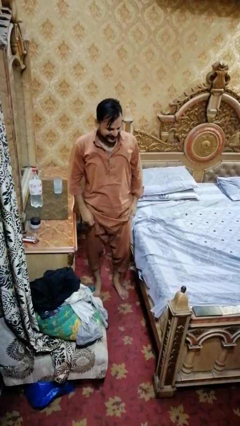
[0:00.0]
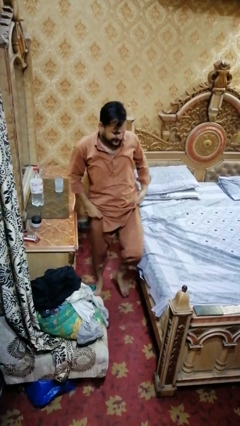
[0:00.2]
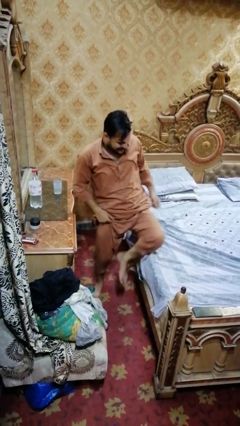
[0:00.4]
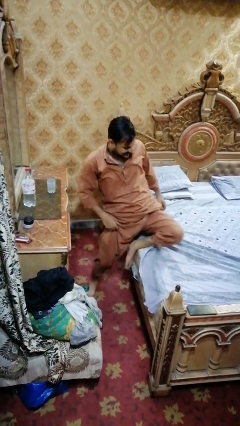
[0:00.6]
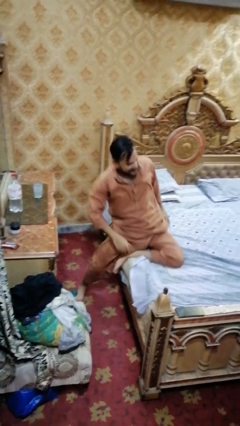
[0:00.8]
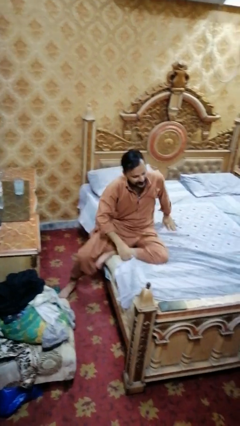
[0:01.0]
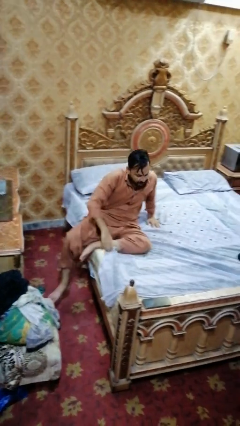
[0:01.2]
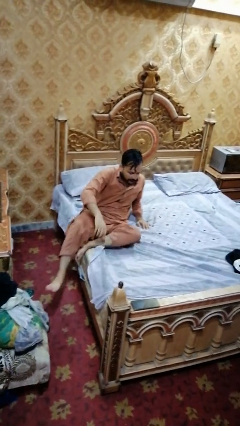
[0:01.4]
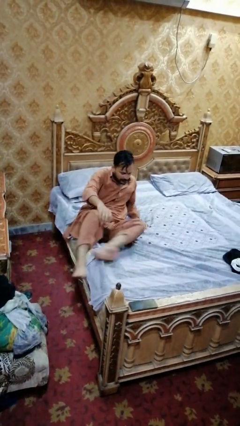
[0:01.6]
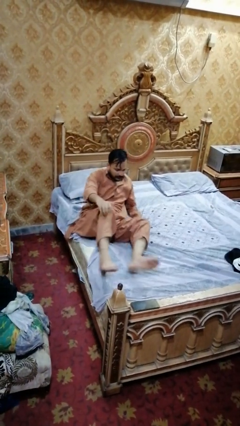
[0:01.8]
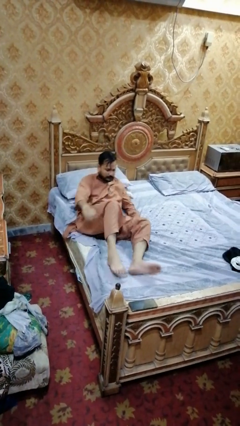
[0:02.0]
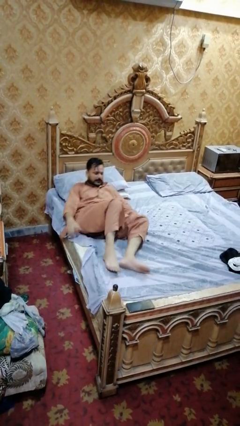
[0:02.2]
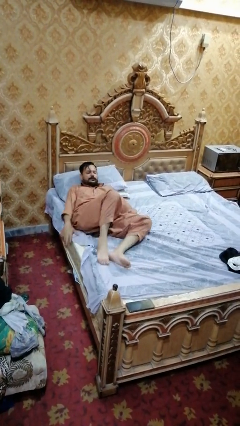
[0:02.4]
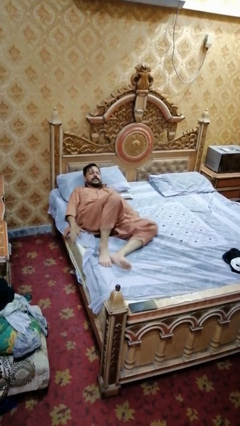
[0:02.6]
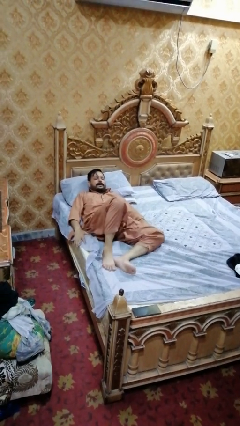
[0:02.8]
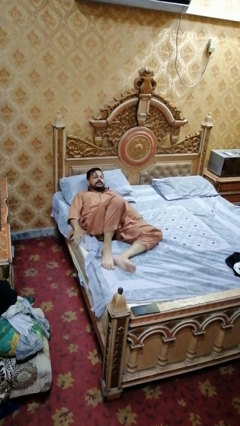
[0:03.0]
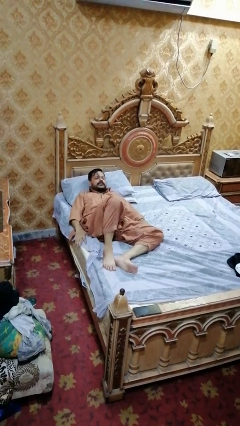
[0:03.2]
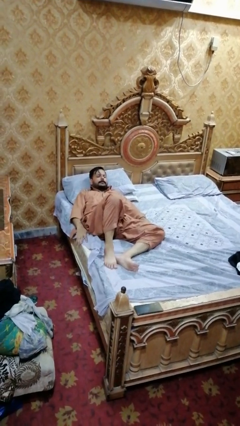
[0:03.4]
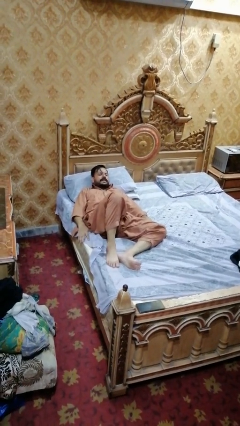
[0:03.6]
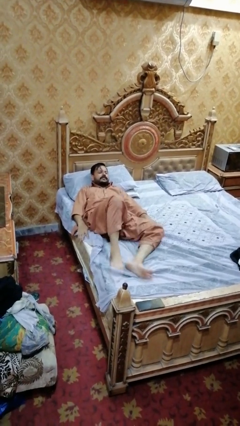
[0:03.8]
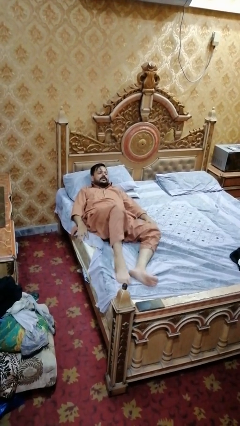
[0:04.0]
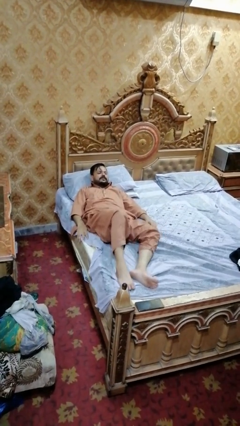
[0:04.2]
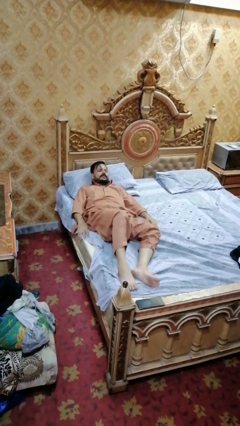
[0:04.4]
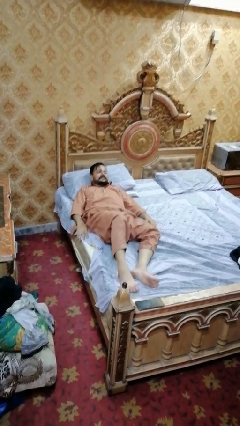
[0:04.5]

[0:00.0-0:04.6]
person lies down on bed

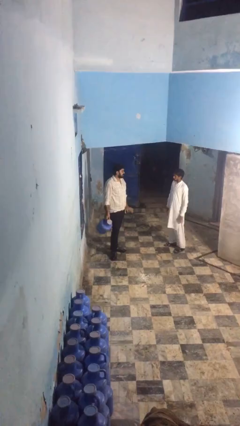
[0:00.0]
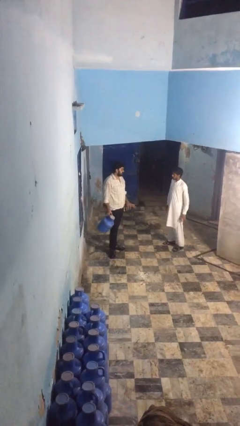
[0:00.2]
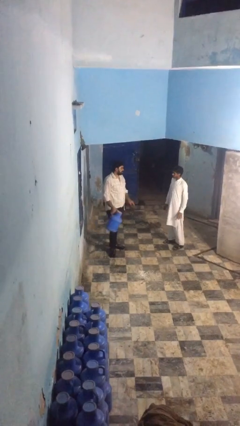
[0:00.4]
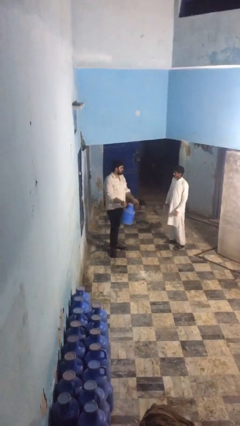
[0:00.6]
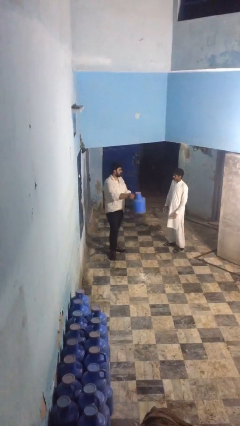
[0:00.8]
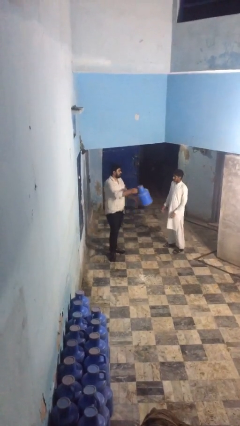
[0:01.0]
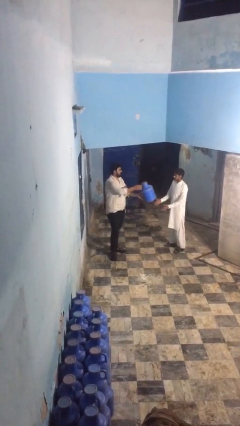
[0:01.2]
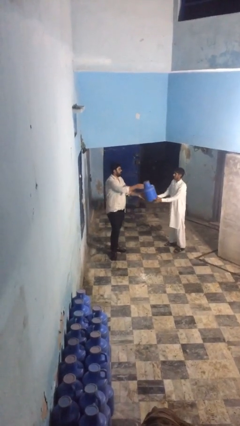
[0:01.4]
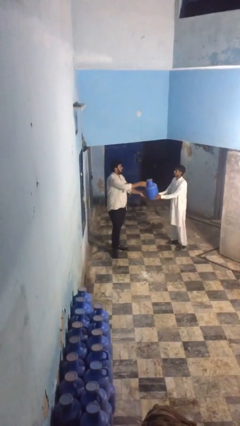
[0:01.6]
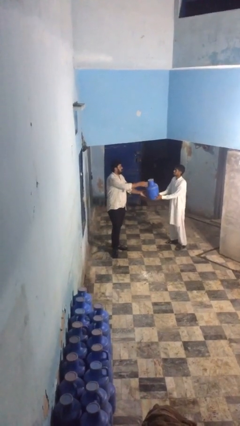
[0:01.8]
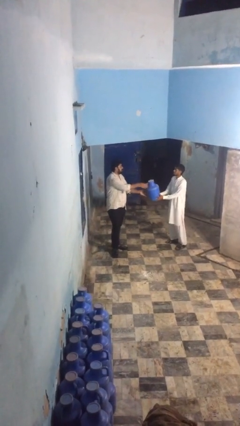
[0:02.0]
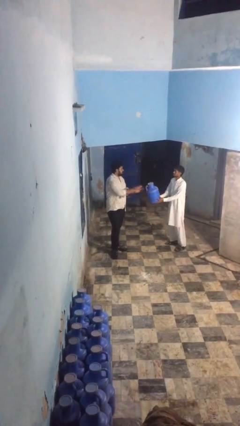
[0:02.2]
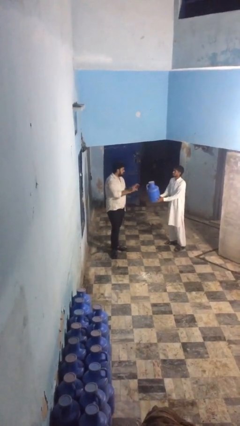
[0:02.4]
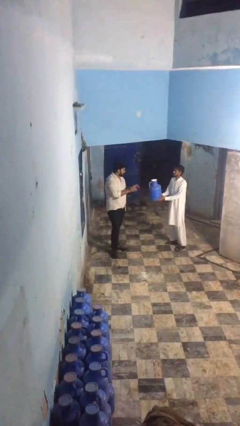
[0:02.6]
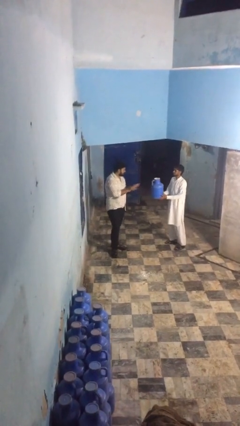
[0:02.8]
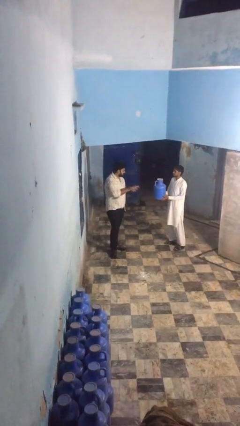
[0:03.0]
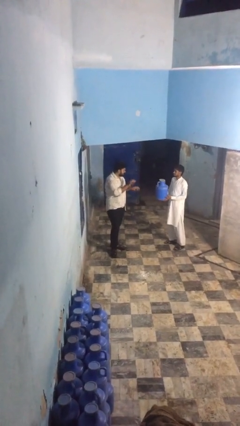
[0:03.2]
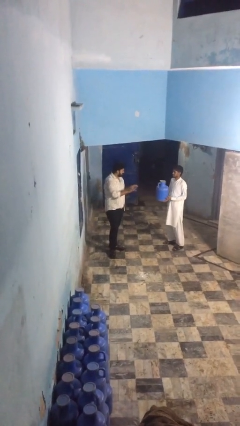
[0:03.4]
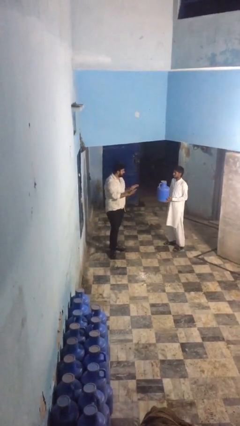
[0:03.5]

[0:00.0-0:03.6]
person transfers object to person

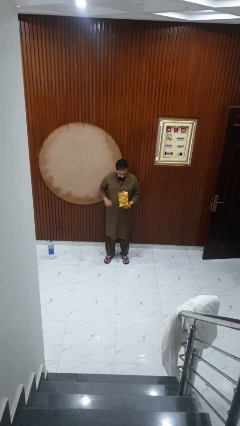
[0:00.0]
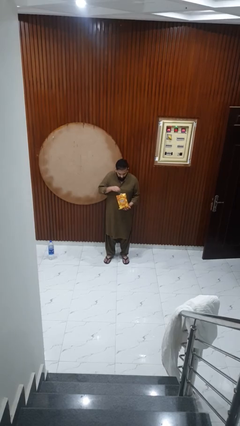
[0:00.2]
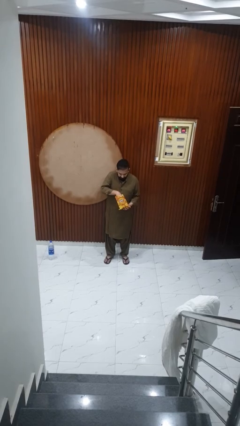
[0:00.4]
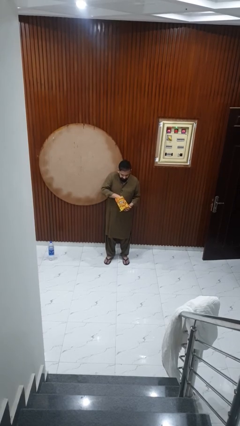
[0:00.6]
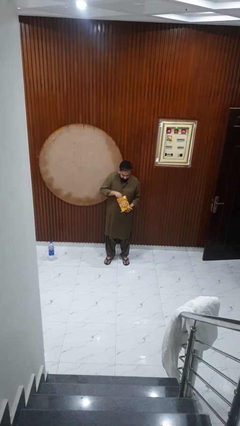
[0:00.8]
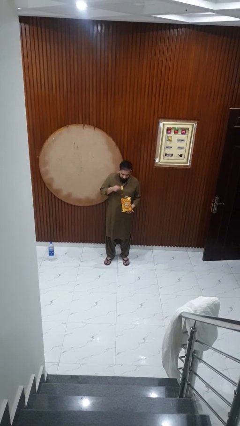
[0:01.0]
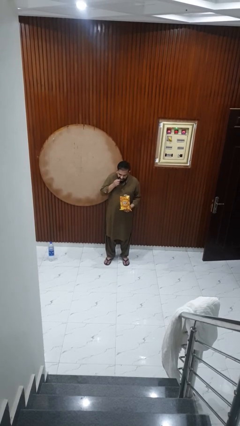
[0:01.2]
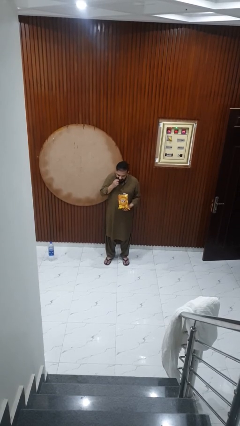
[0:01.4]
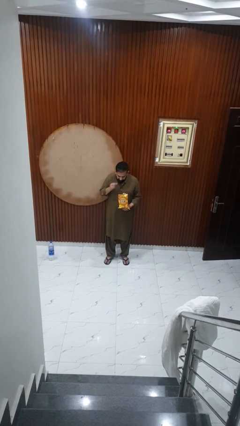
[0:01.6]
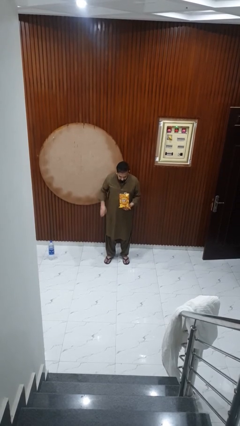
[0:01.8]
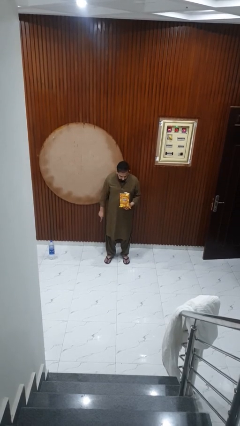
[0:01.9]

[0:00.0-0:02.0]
person eats snack from bag

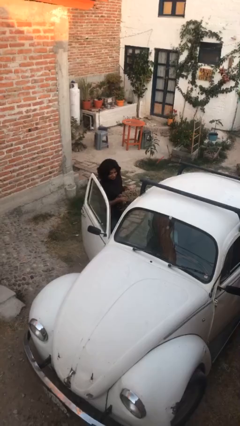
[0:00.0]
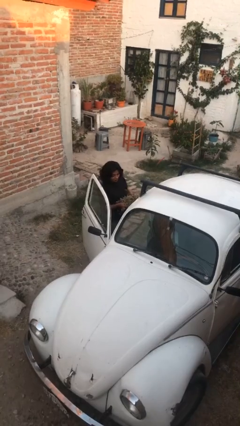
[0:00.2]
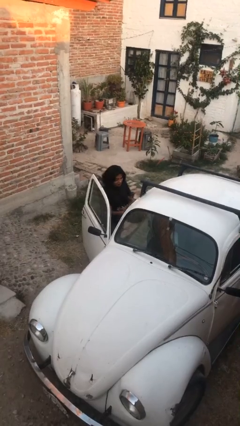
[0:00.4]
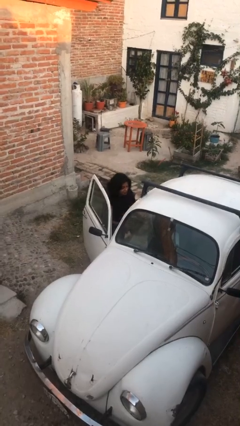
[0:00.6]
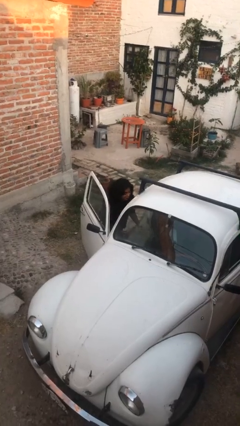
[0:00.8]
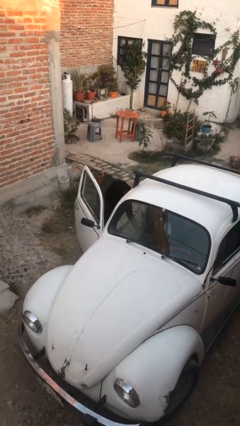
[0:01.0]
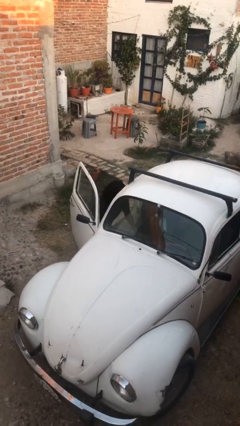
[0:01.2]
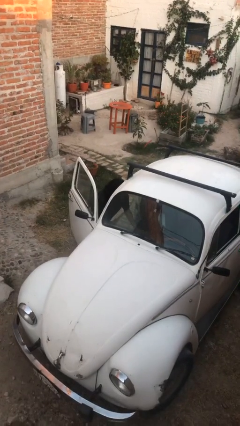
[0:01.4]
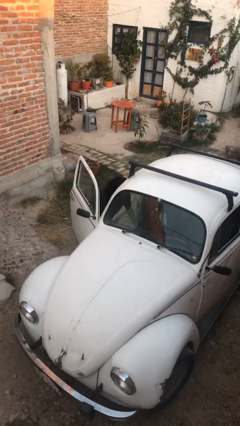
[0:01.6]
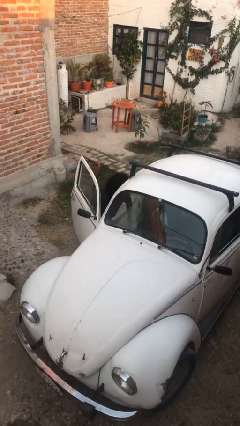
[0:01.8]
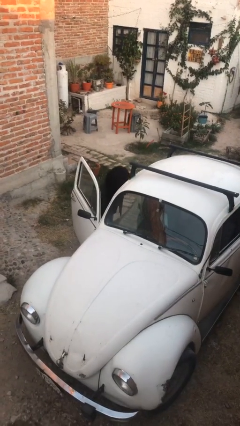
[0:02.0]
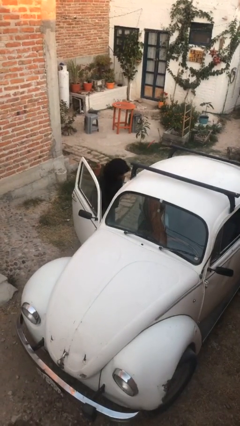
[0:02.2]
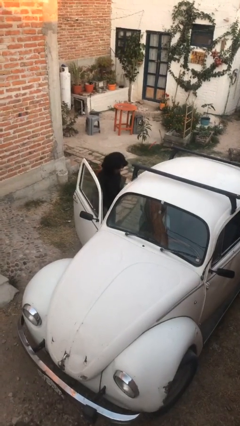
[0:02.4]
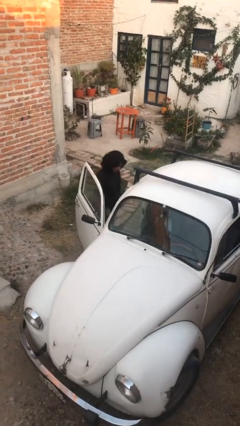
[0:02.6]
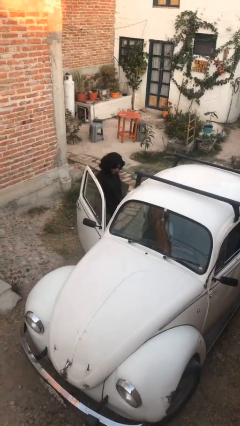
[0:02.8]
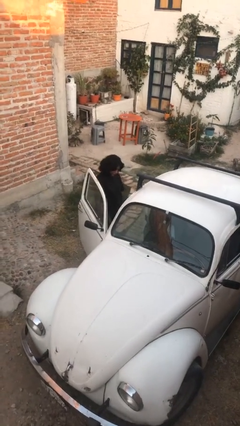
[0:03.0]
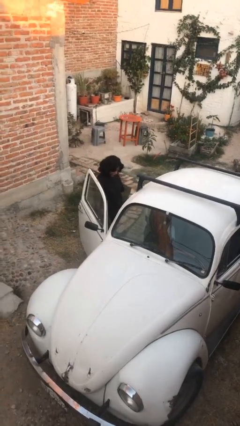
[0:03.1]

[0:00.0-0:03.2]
person loads car

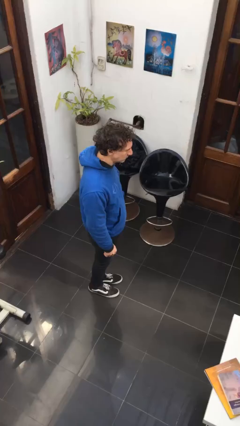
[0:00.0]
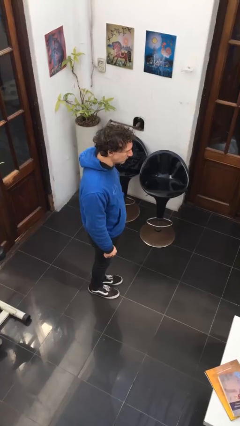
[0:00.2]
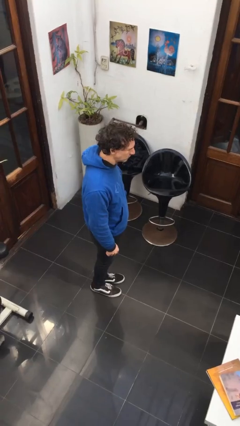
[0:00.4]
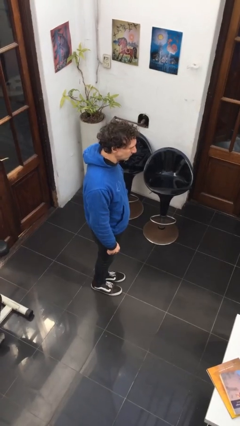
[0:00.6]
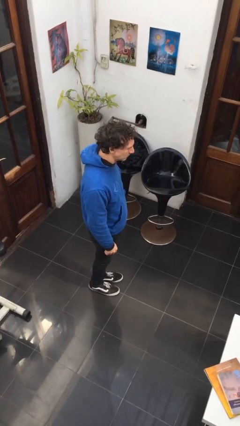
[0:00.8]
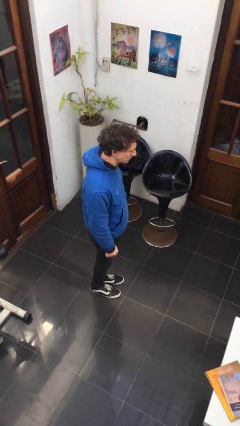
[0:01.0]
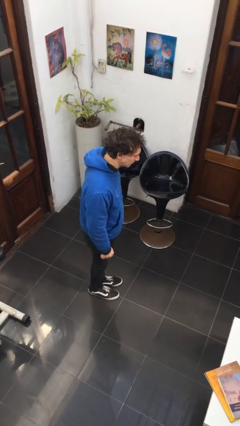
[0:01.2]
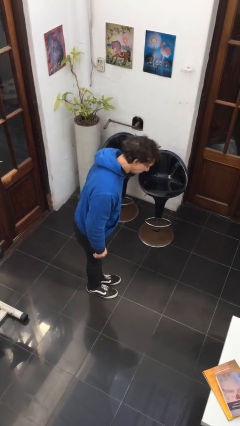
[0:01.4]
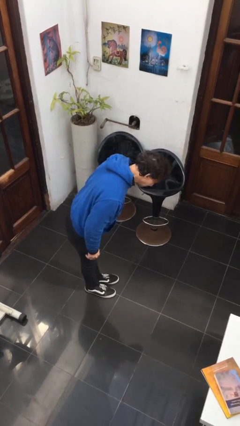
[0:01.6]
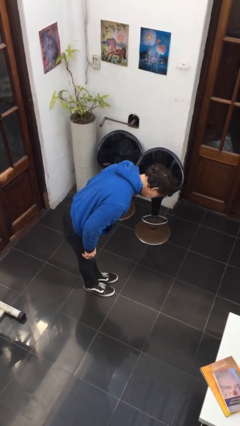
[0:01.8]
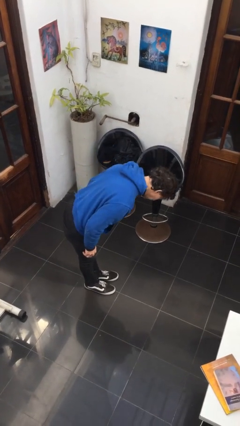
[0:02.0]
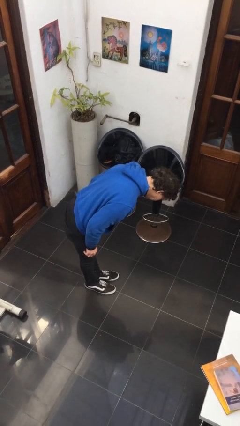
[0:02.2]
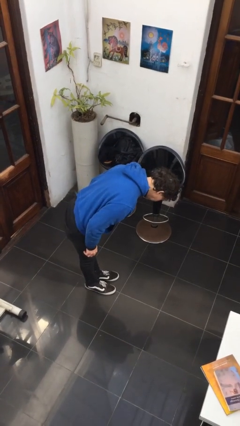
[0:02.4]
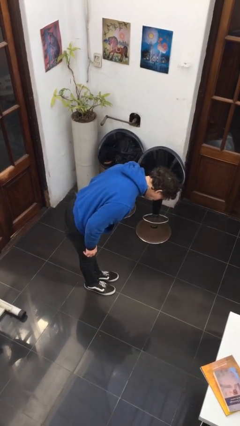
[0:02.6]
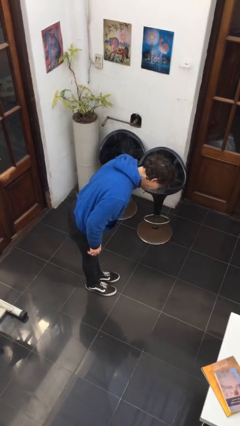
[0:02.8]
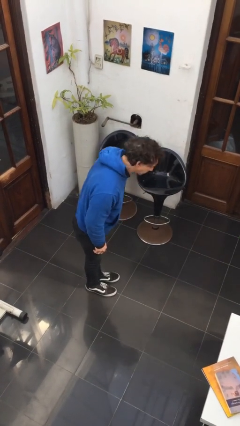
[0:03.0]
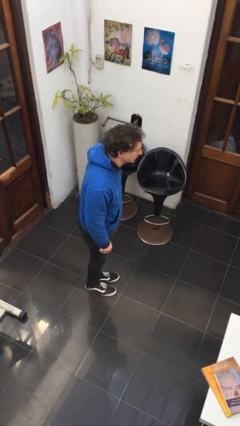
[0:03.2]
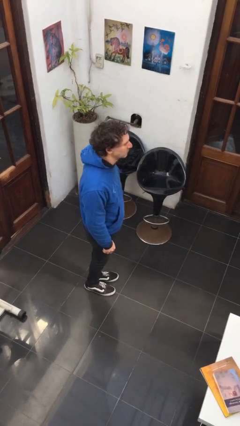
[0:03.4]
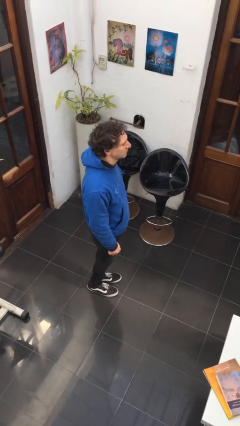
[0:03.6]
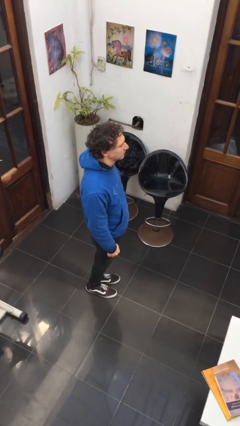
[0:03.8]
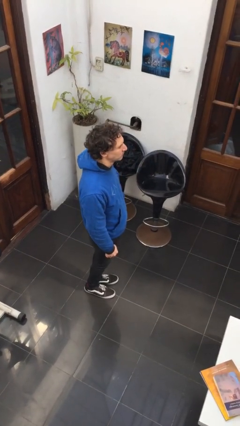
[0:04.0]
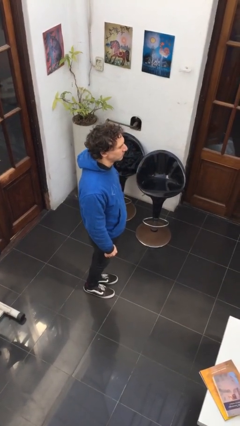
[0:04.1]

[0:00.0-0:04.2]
person bows
